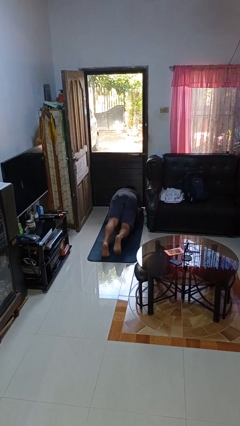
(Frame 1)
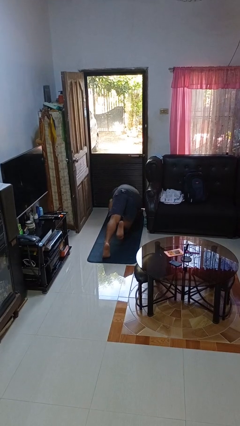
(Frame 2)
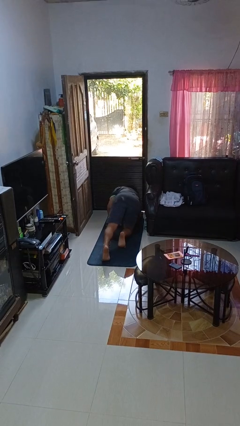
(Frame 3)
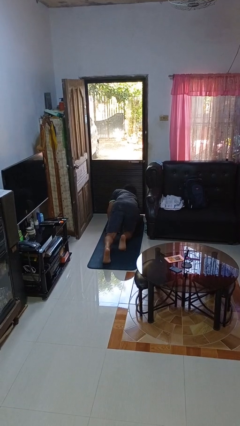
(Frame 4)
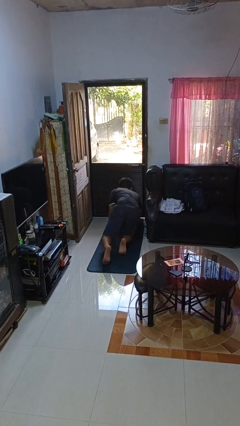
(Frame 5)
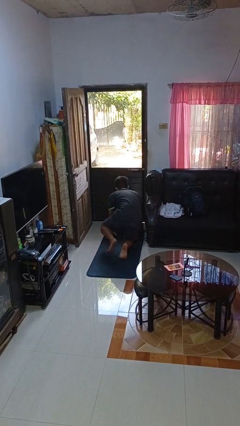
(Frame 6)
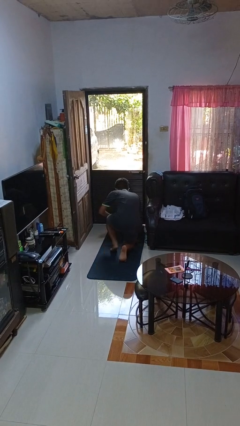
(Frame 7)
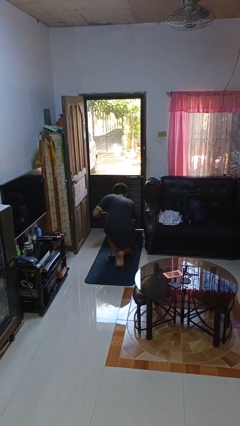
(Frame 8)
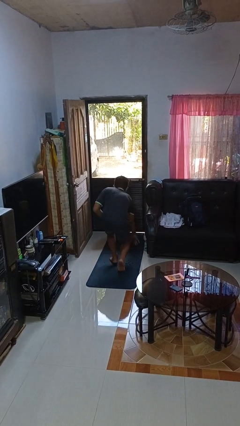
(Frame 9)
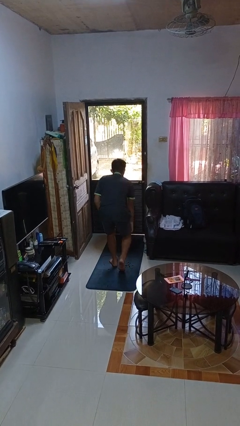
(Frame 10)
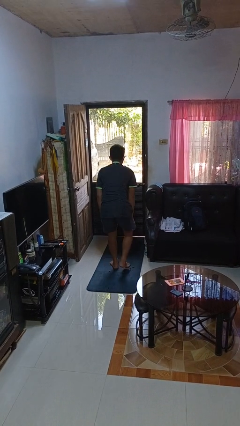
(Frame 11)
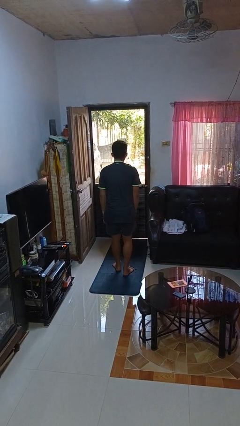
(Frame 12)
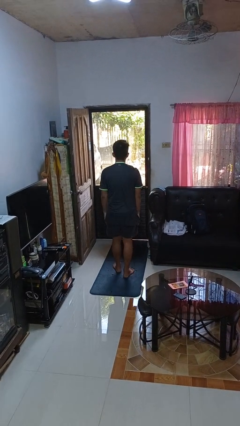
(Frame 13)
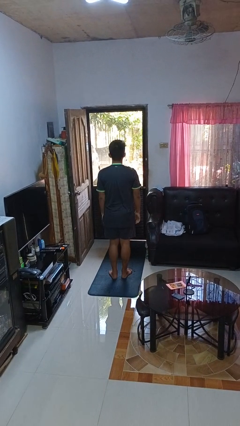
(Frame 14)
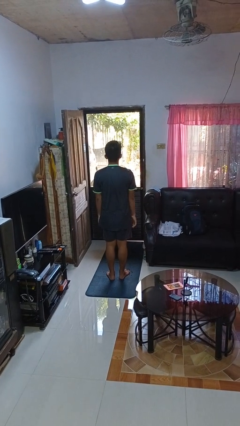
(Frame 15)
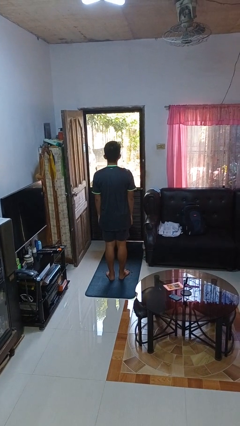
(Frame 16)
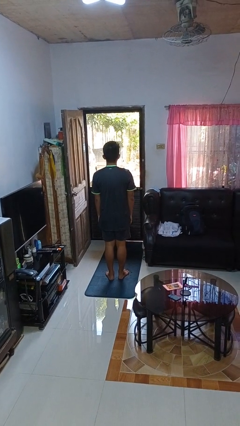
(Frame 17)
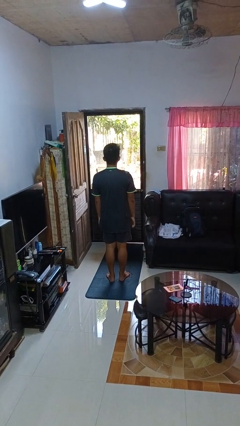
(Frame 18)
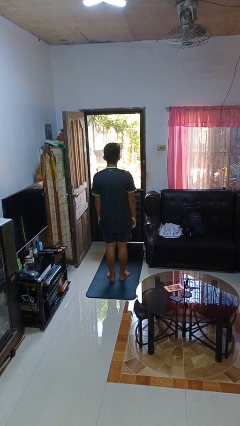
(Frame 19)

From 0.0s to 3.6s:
person stands up from floor

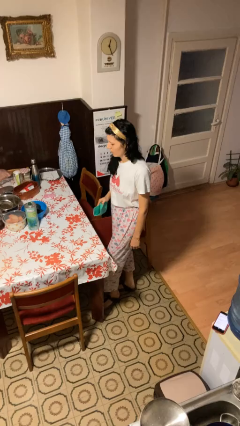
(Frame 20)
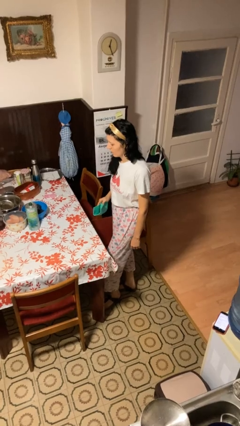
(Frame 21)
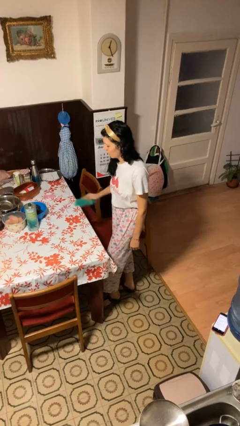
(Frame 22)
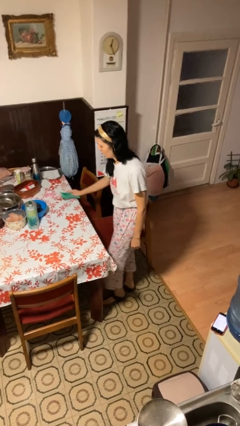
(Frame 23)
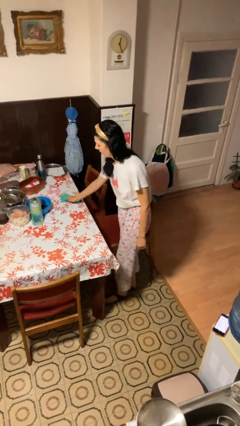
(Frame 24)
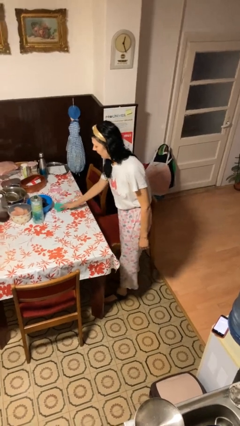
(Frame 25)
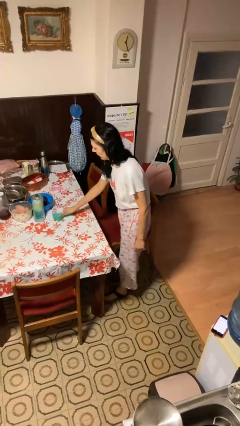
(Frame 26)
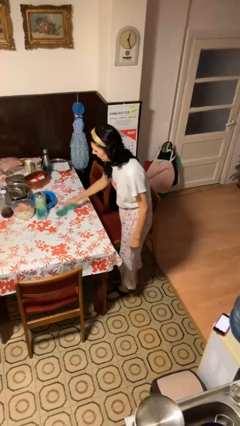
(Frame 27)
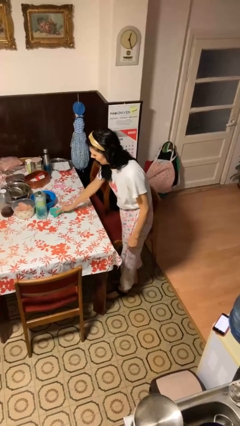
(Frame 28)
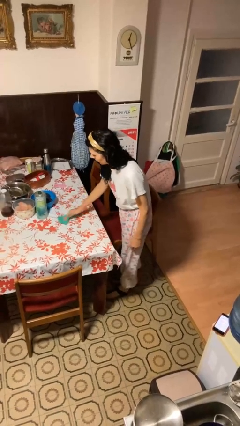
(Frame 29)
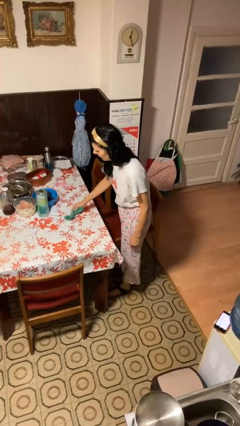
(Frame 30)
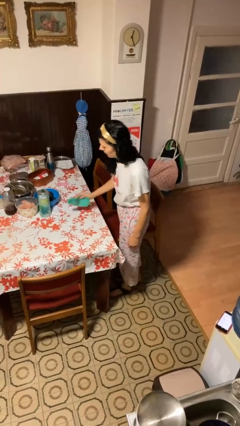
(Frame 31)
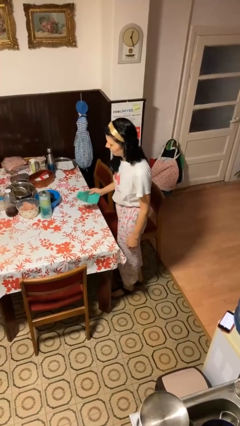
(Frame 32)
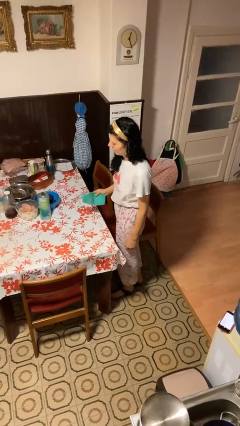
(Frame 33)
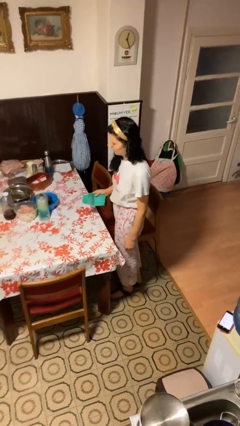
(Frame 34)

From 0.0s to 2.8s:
person cleans table with rag

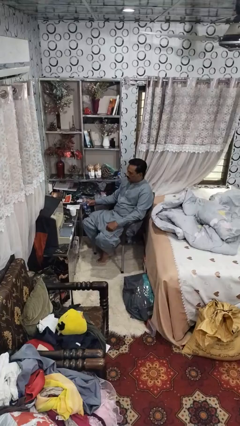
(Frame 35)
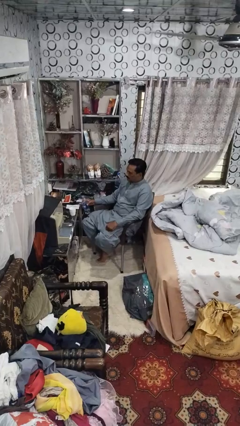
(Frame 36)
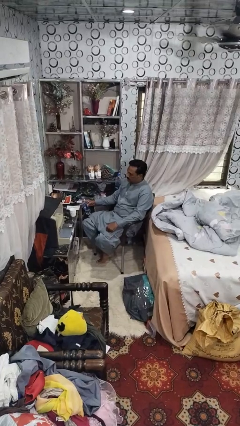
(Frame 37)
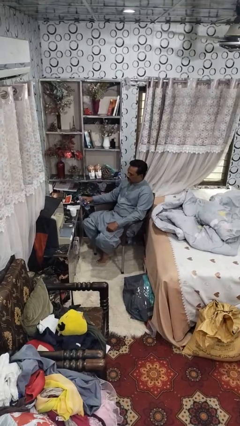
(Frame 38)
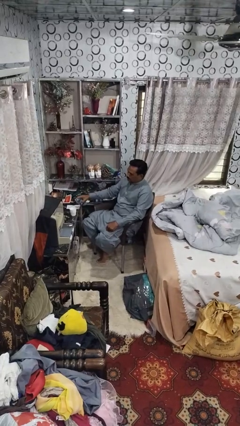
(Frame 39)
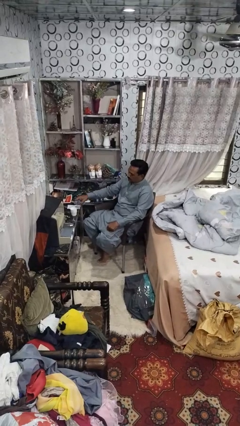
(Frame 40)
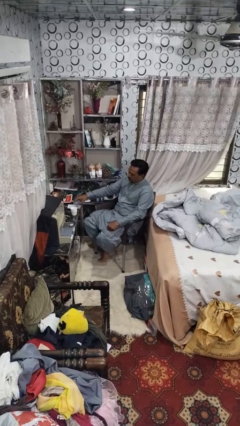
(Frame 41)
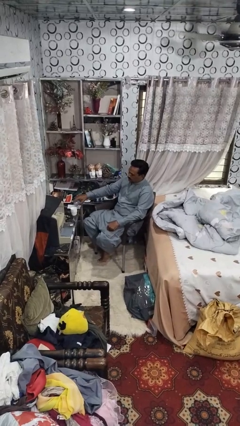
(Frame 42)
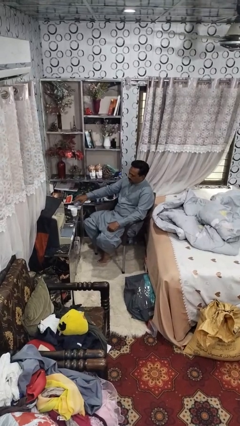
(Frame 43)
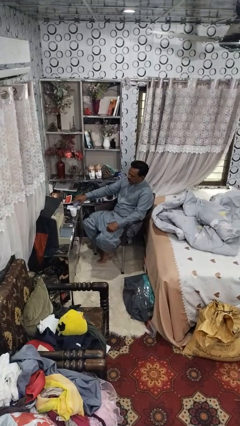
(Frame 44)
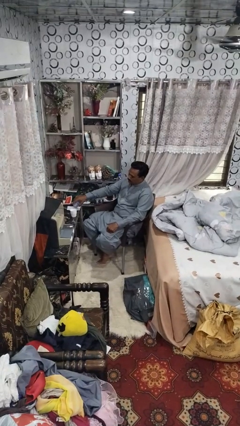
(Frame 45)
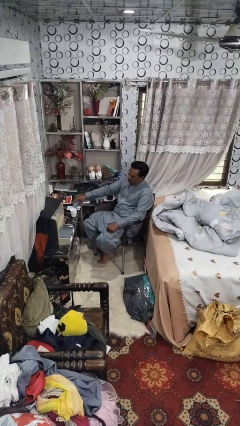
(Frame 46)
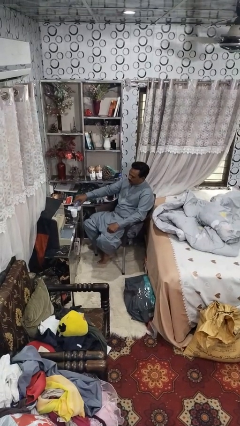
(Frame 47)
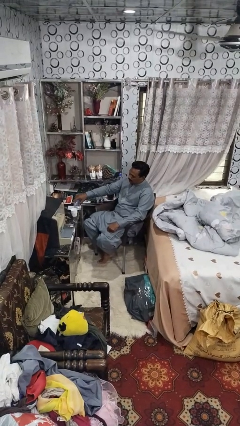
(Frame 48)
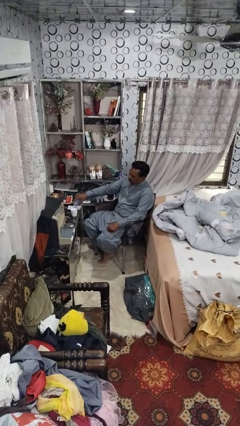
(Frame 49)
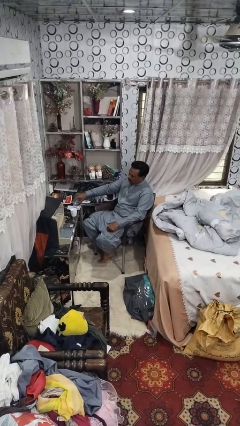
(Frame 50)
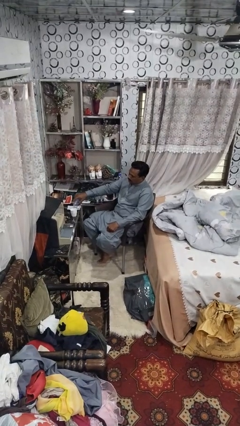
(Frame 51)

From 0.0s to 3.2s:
person pours liquid into cup

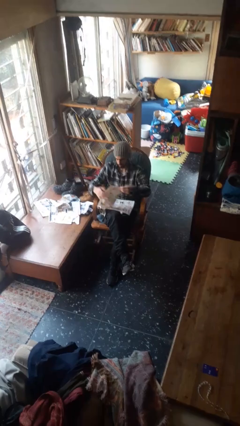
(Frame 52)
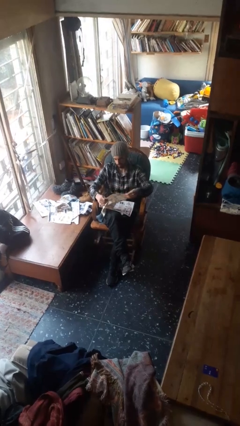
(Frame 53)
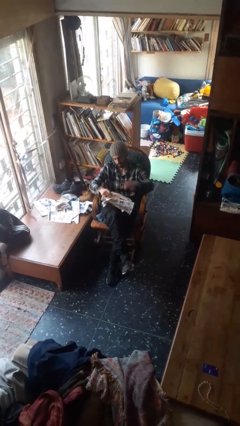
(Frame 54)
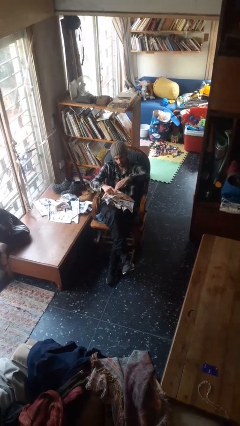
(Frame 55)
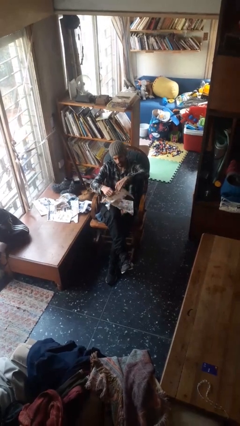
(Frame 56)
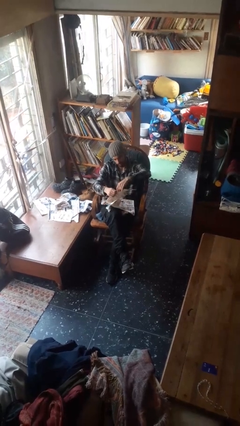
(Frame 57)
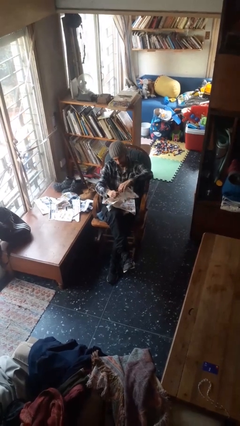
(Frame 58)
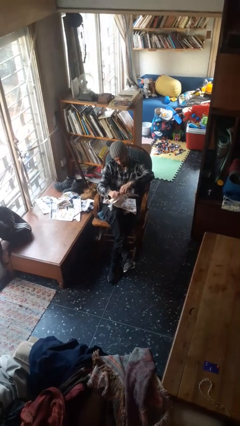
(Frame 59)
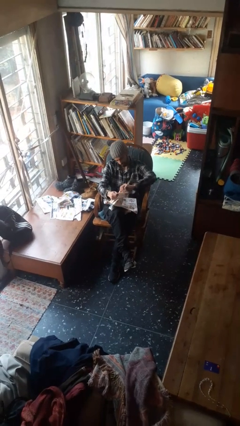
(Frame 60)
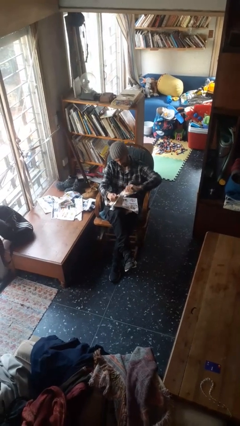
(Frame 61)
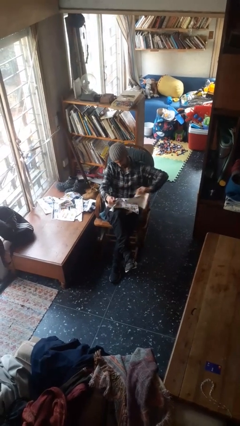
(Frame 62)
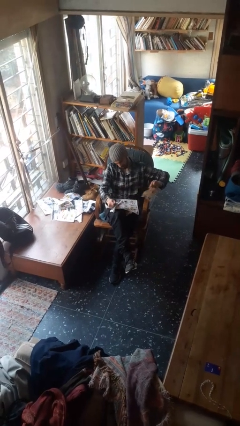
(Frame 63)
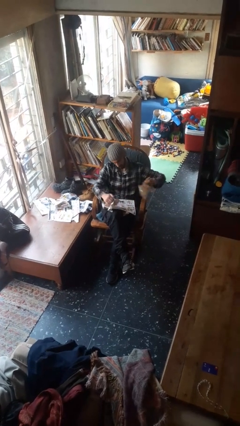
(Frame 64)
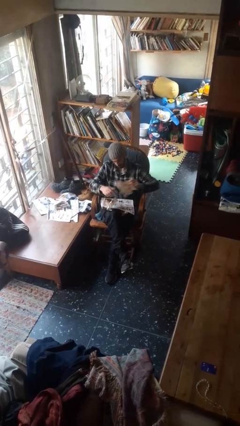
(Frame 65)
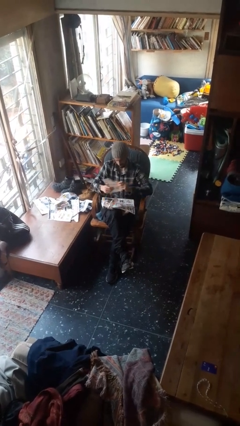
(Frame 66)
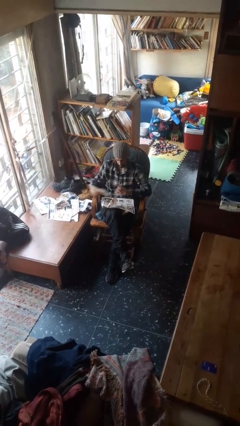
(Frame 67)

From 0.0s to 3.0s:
person tears paper

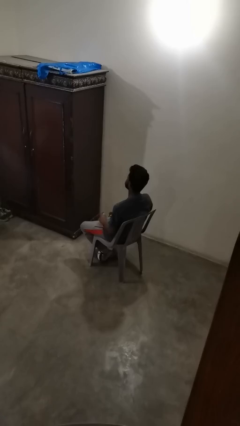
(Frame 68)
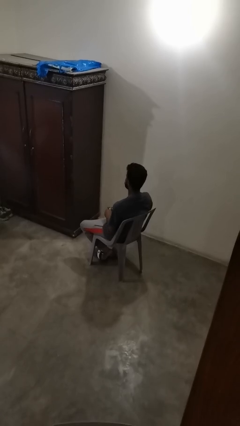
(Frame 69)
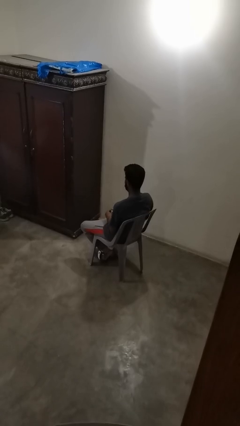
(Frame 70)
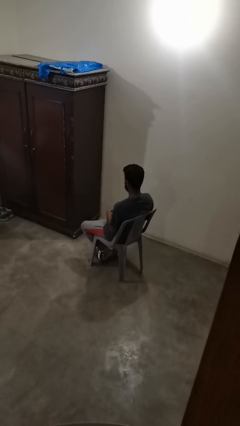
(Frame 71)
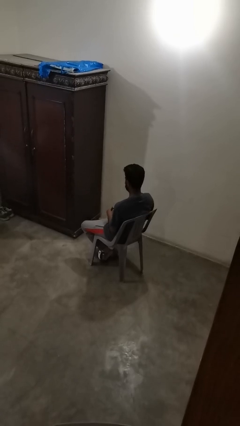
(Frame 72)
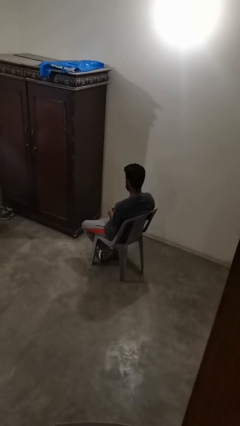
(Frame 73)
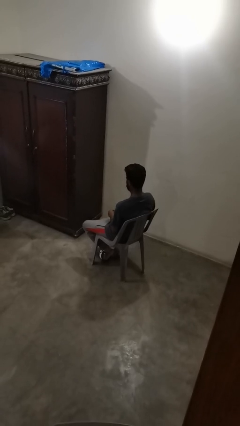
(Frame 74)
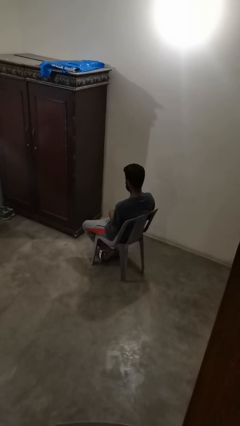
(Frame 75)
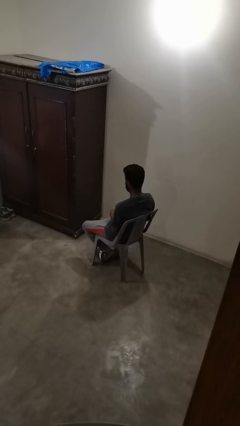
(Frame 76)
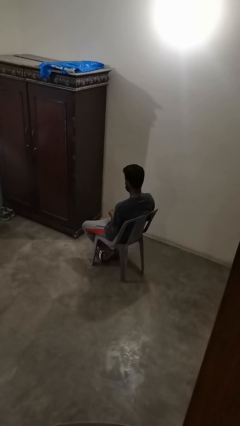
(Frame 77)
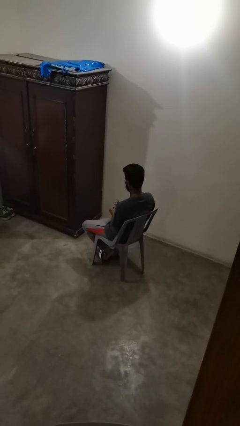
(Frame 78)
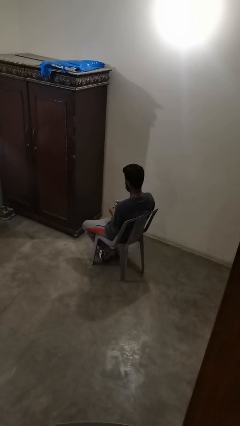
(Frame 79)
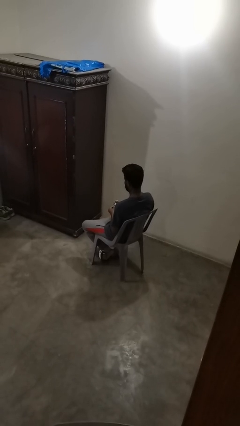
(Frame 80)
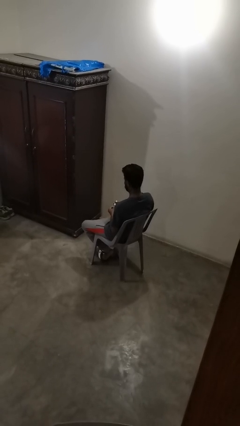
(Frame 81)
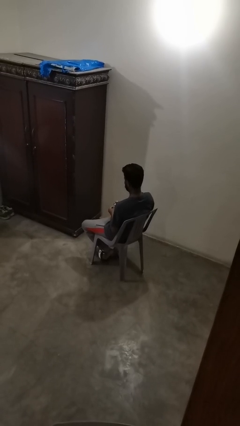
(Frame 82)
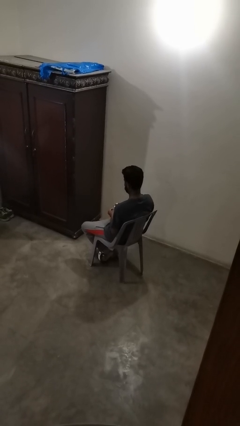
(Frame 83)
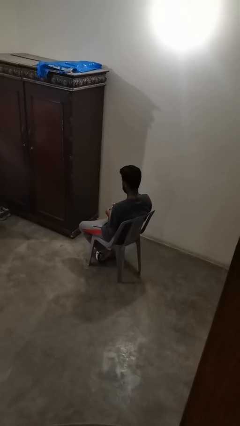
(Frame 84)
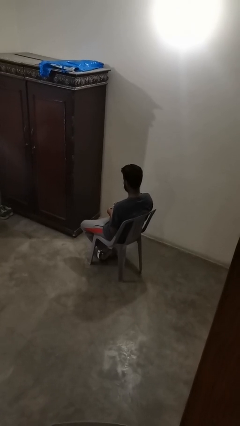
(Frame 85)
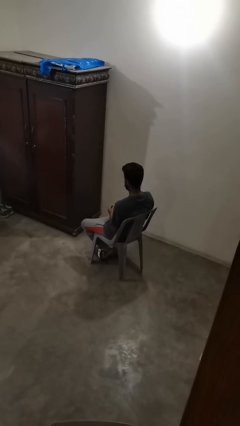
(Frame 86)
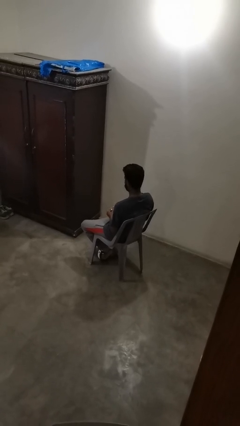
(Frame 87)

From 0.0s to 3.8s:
person clips fingernails

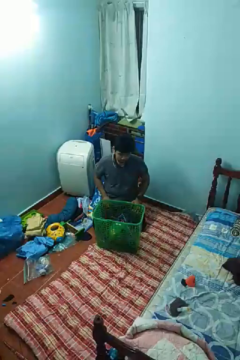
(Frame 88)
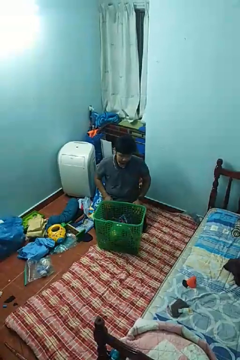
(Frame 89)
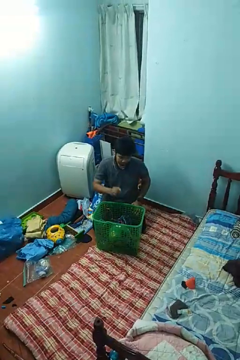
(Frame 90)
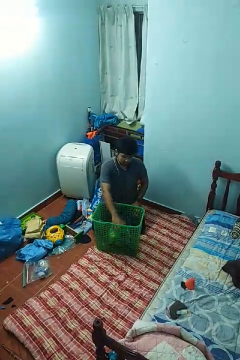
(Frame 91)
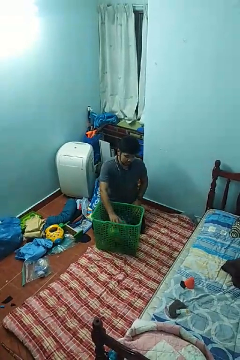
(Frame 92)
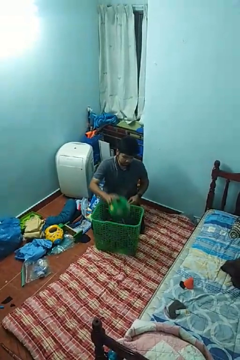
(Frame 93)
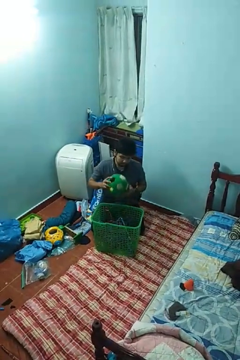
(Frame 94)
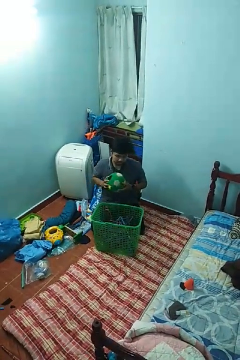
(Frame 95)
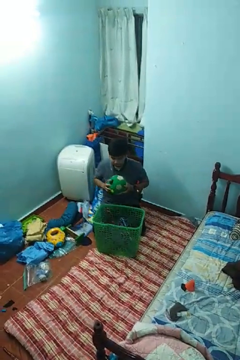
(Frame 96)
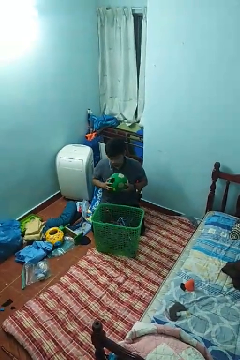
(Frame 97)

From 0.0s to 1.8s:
person takes object from basket
